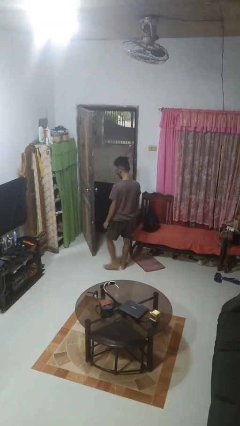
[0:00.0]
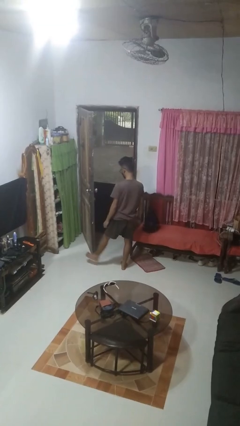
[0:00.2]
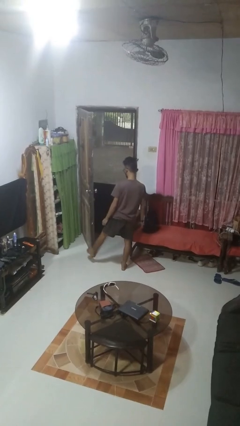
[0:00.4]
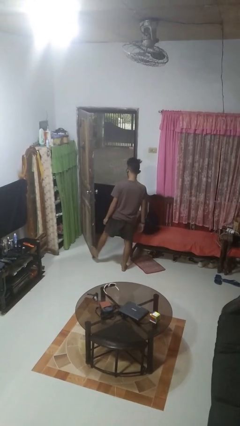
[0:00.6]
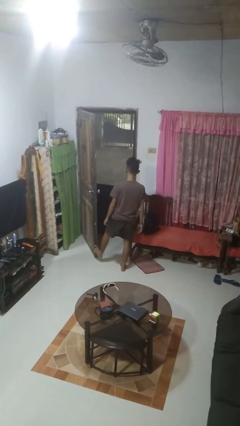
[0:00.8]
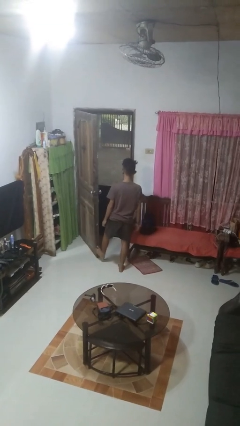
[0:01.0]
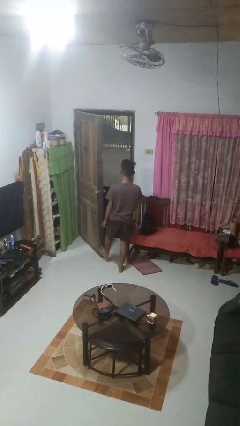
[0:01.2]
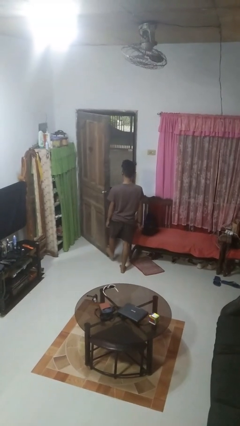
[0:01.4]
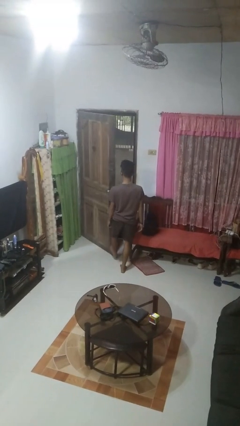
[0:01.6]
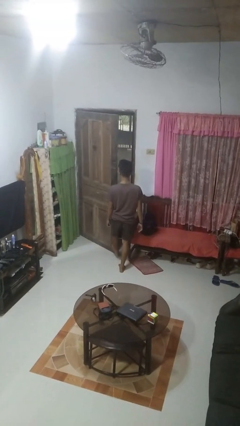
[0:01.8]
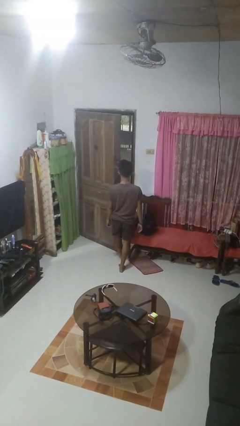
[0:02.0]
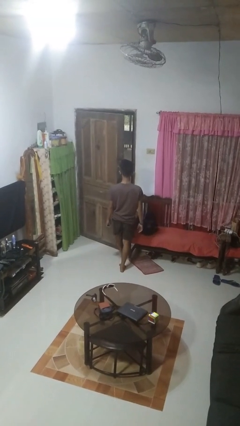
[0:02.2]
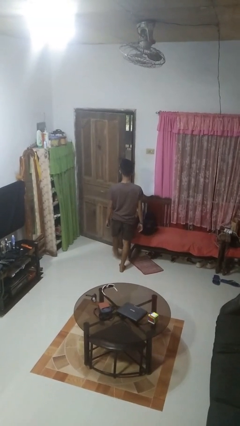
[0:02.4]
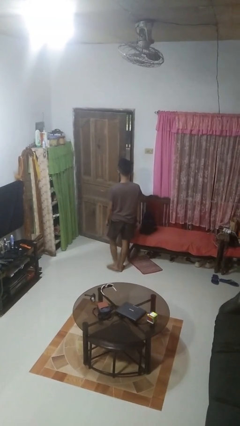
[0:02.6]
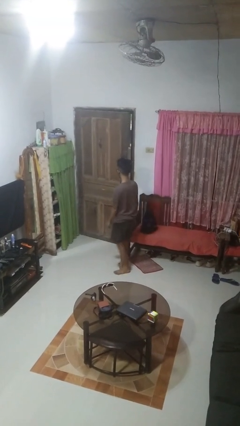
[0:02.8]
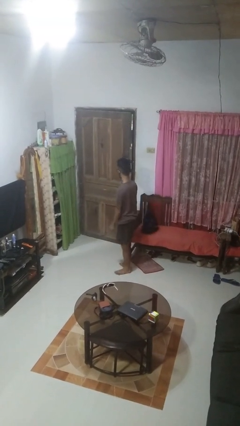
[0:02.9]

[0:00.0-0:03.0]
person closes door with foot

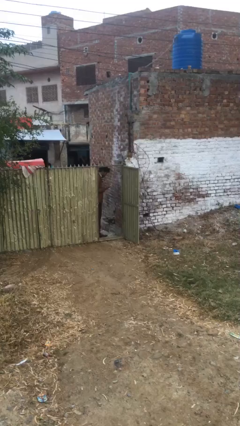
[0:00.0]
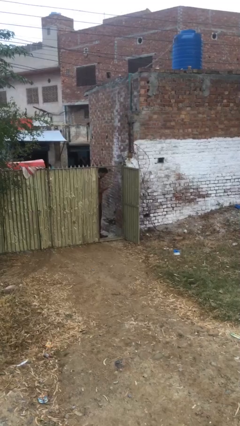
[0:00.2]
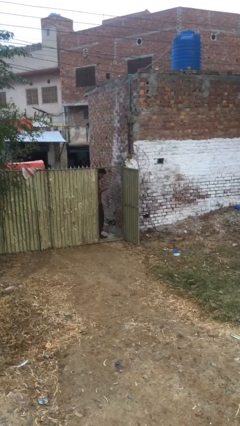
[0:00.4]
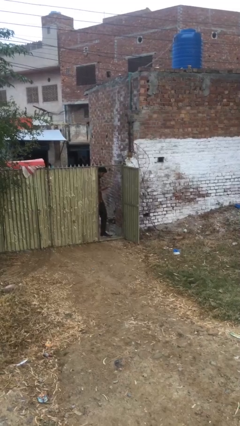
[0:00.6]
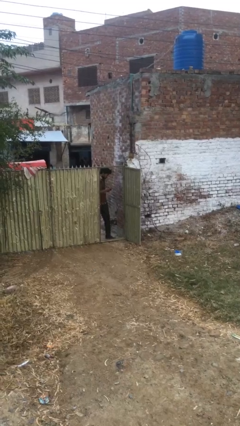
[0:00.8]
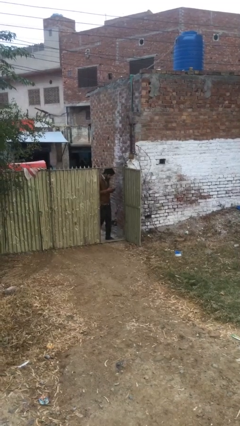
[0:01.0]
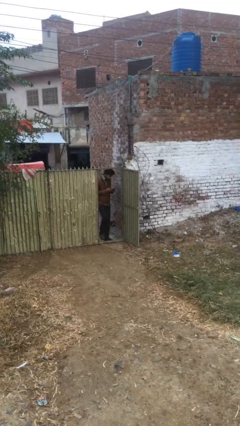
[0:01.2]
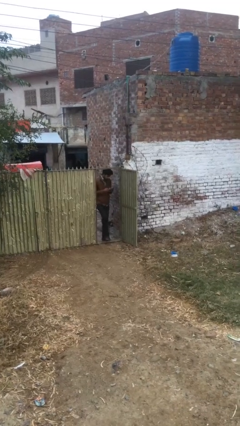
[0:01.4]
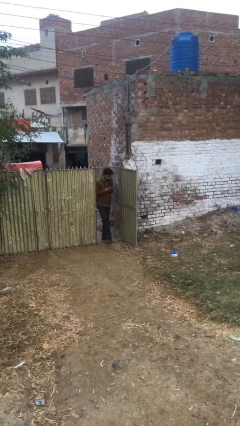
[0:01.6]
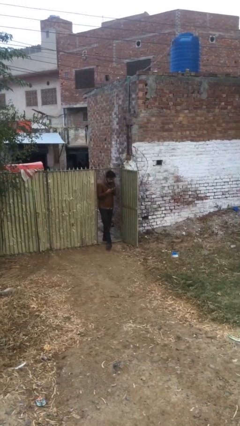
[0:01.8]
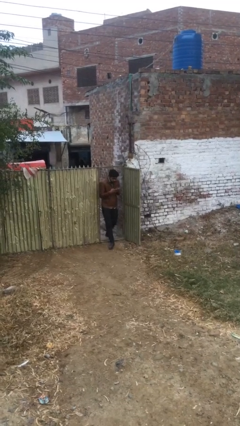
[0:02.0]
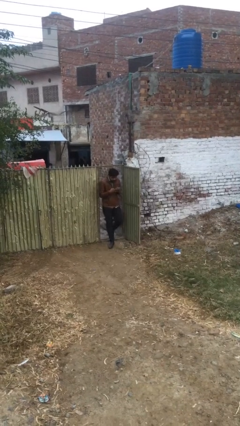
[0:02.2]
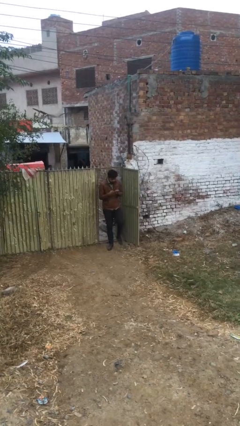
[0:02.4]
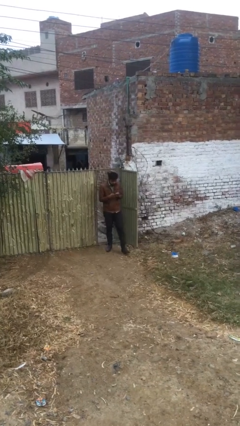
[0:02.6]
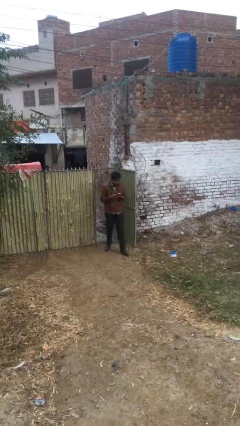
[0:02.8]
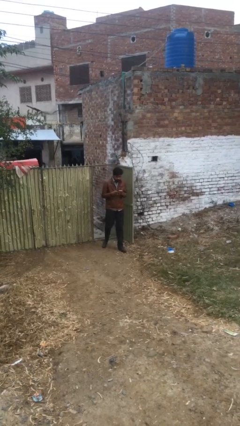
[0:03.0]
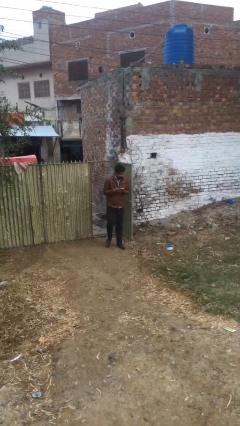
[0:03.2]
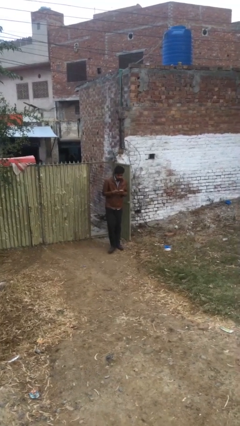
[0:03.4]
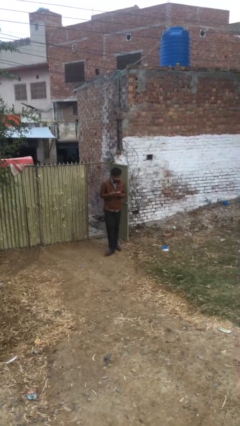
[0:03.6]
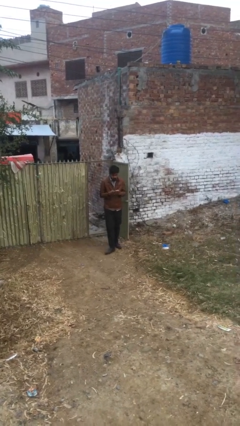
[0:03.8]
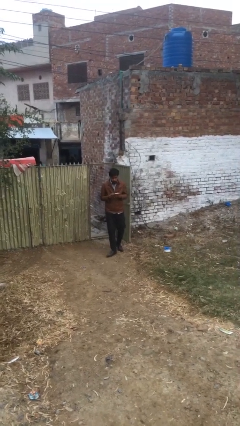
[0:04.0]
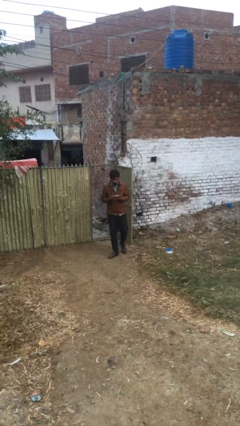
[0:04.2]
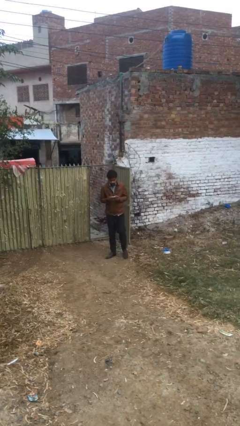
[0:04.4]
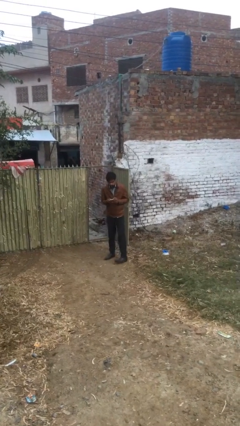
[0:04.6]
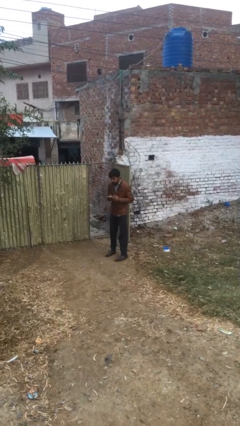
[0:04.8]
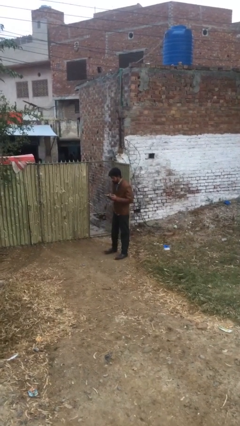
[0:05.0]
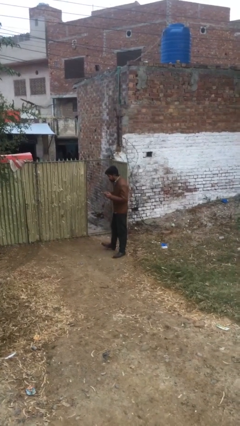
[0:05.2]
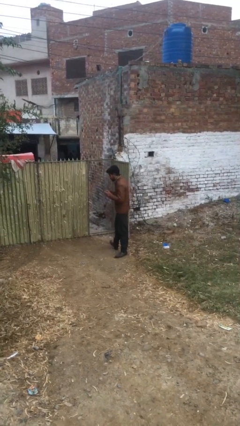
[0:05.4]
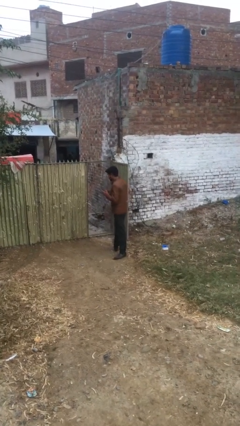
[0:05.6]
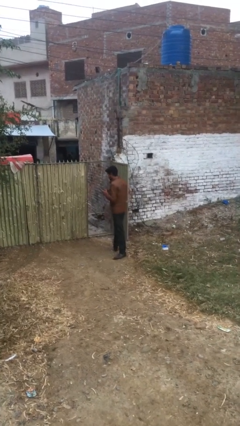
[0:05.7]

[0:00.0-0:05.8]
person exits scene through structure

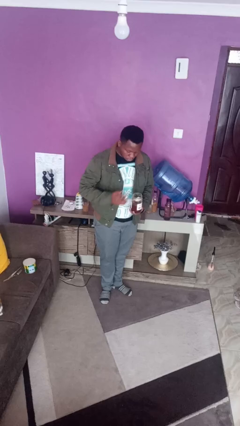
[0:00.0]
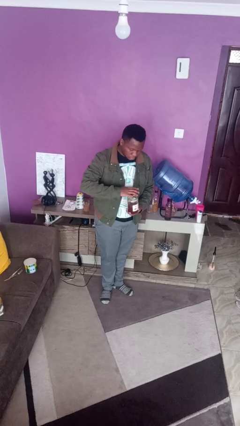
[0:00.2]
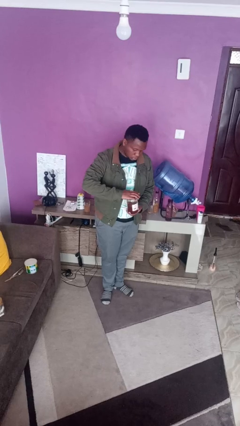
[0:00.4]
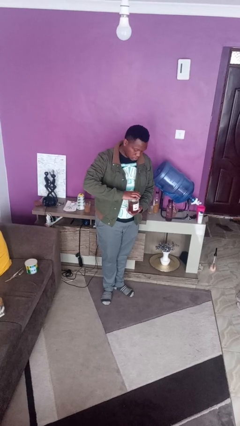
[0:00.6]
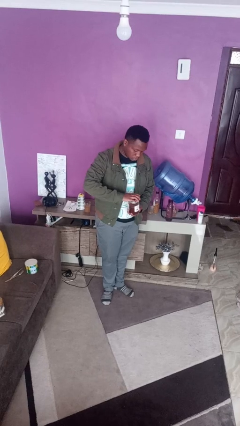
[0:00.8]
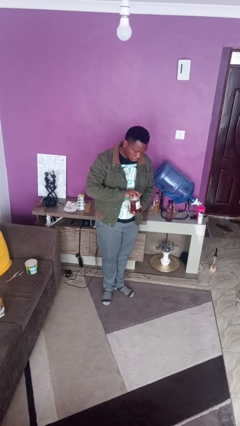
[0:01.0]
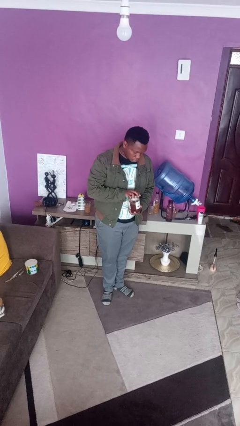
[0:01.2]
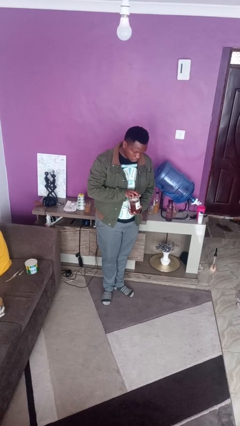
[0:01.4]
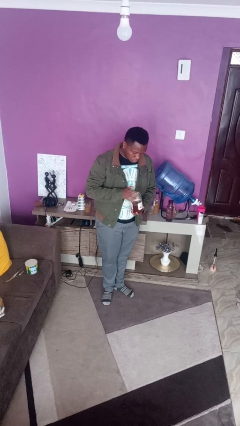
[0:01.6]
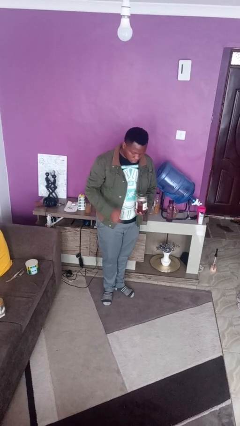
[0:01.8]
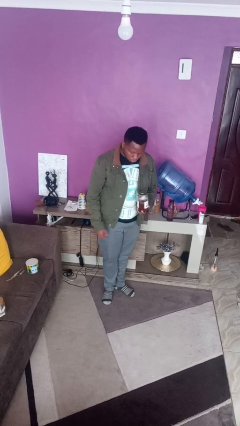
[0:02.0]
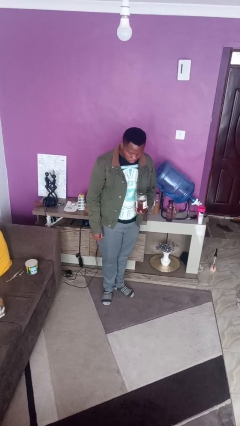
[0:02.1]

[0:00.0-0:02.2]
person closes jar

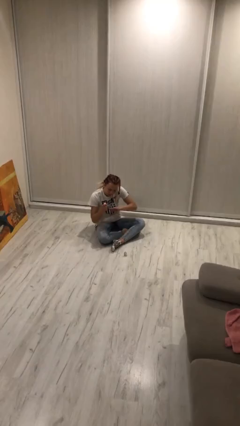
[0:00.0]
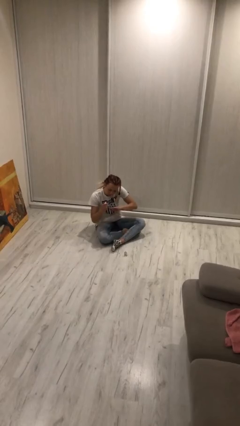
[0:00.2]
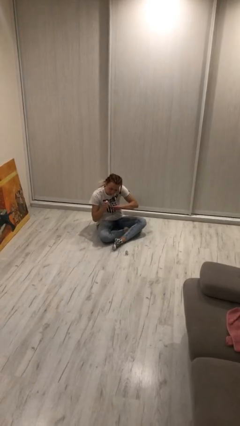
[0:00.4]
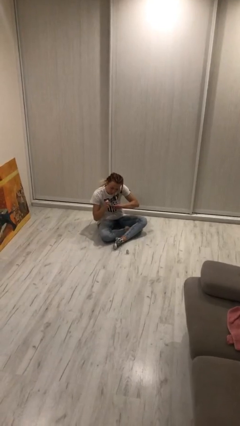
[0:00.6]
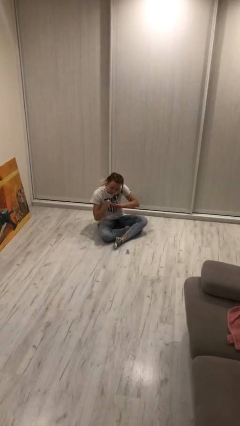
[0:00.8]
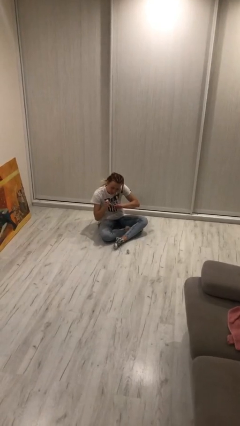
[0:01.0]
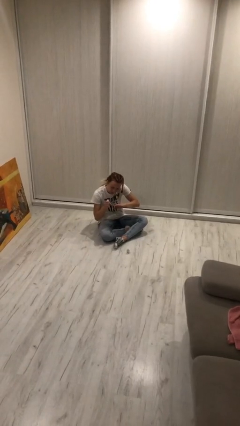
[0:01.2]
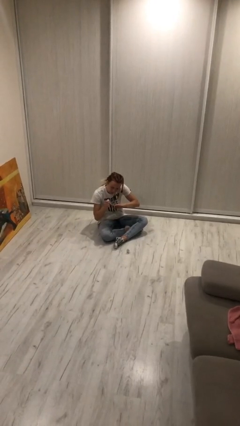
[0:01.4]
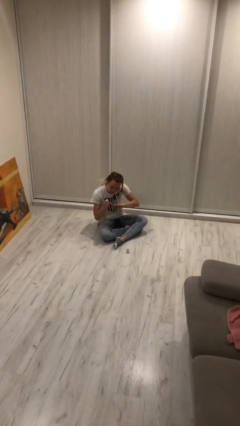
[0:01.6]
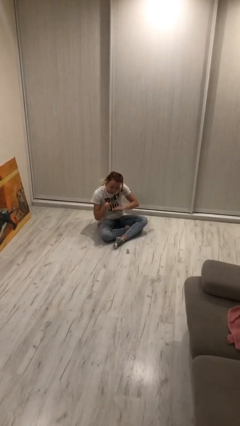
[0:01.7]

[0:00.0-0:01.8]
person paints fingernails

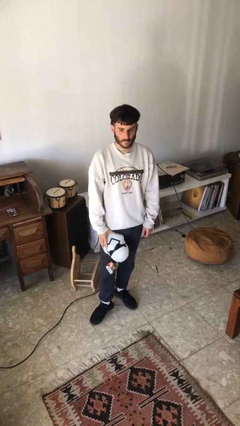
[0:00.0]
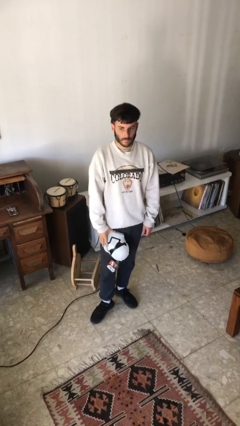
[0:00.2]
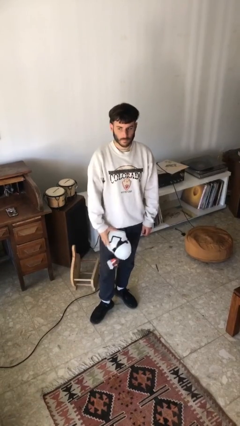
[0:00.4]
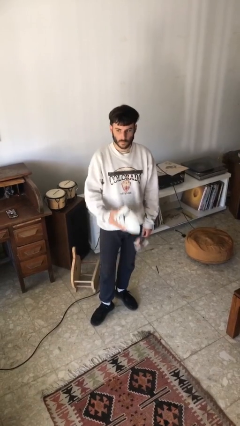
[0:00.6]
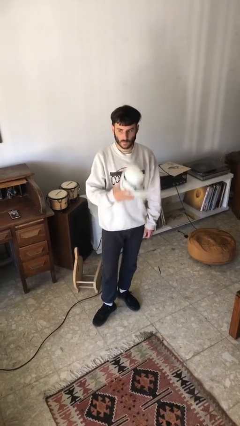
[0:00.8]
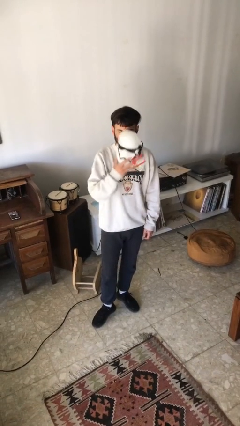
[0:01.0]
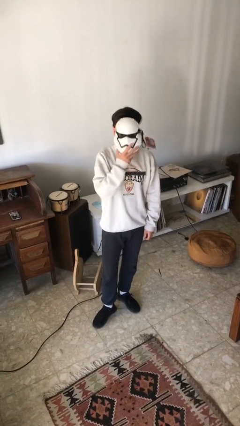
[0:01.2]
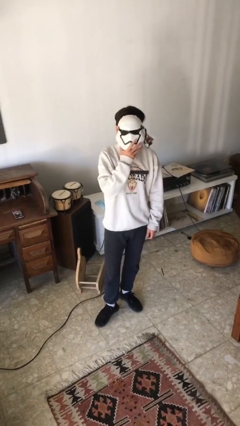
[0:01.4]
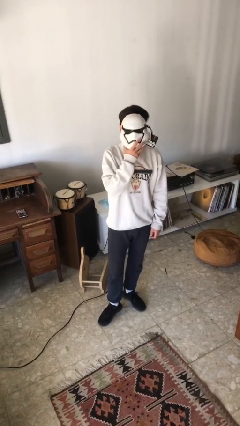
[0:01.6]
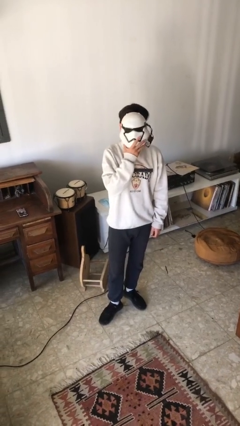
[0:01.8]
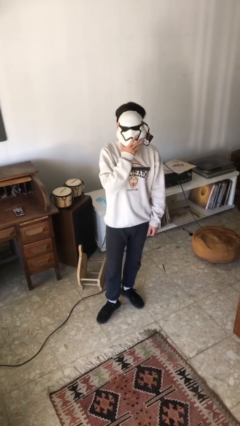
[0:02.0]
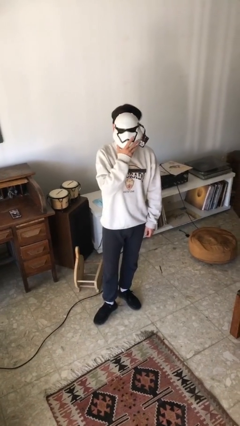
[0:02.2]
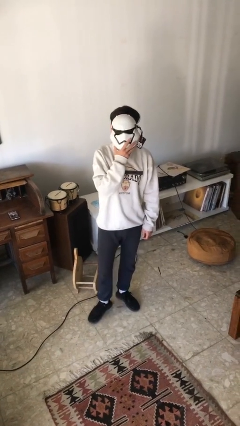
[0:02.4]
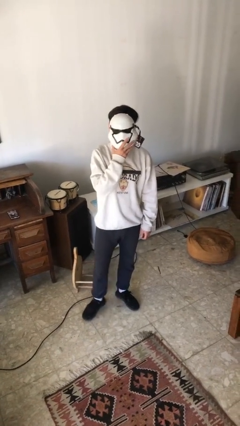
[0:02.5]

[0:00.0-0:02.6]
person puts on facemask

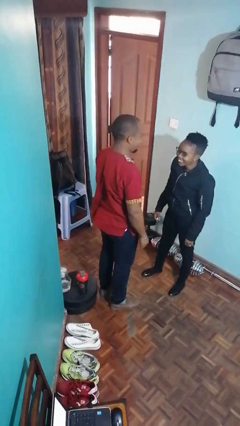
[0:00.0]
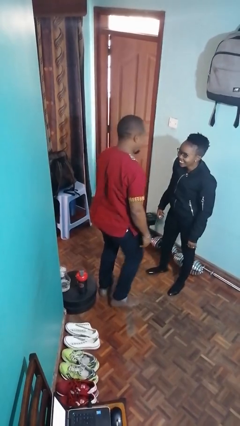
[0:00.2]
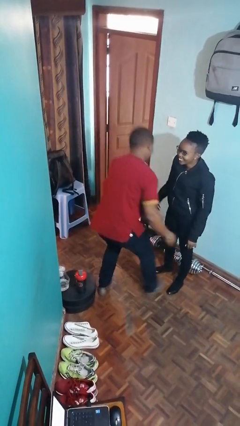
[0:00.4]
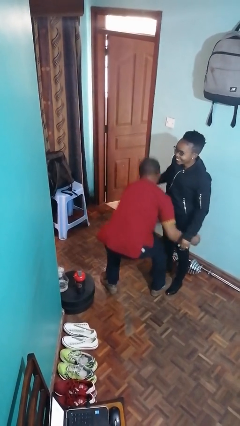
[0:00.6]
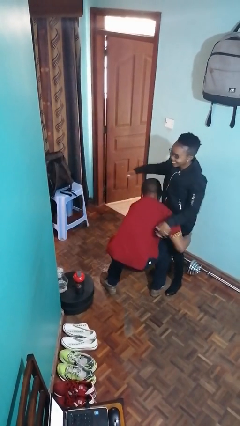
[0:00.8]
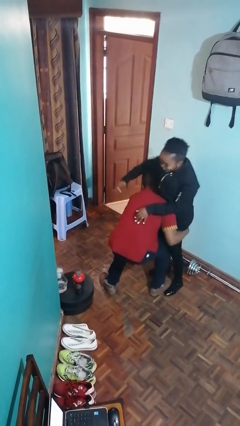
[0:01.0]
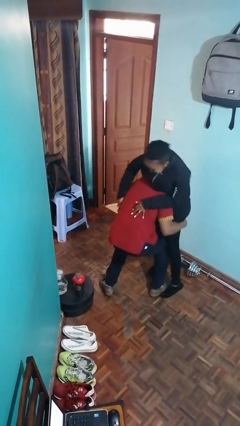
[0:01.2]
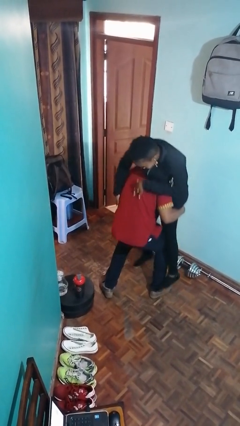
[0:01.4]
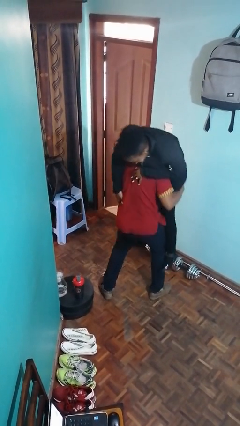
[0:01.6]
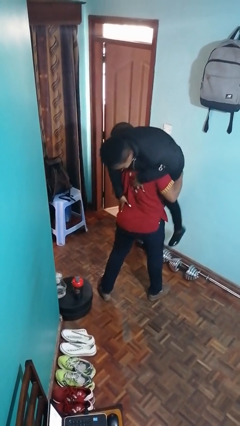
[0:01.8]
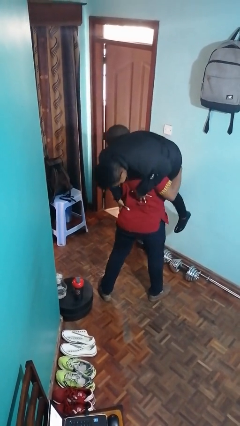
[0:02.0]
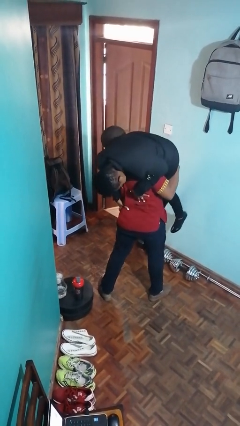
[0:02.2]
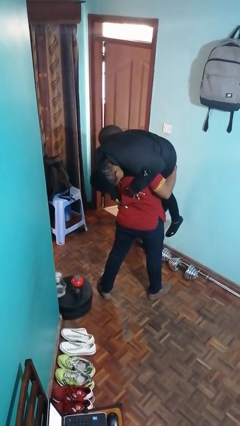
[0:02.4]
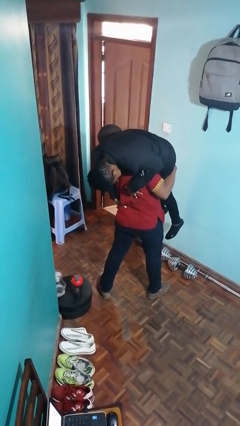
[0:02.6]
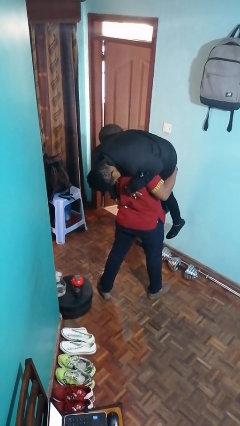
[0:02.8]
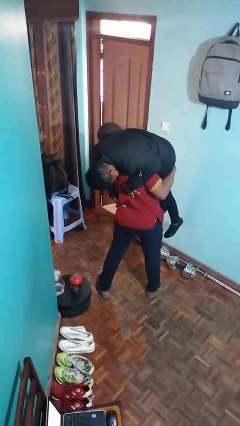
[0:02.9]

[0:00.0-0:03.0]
person carries person over shoulder
